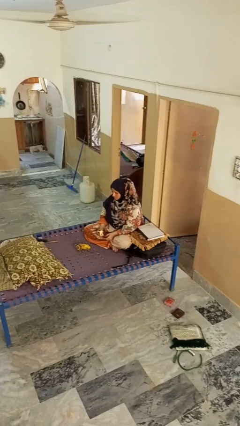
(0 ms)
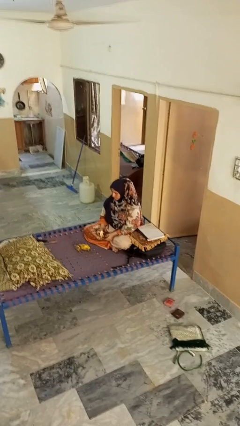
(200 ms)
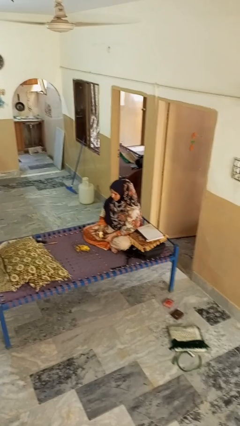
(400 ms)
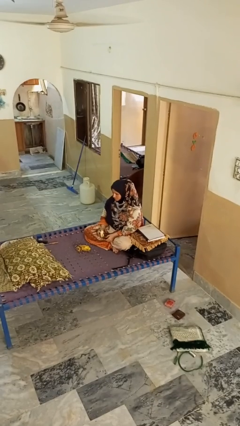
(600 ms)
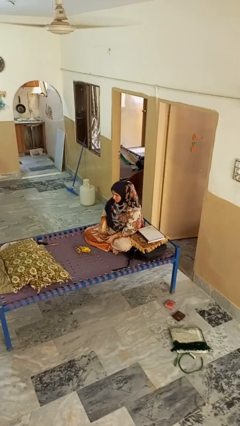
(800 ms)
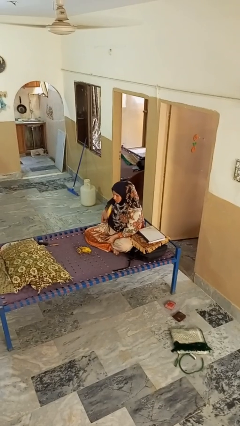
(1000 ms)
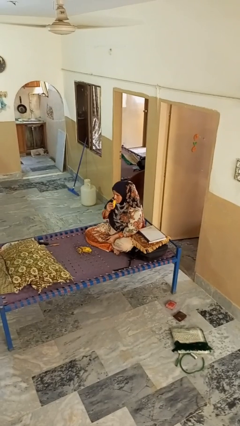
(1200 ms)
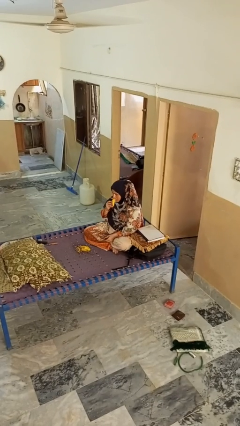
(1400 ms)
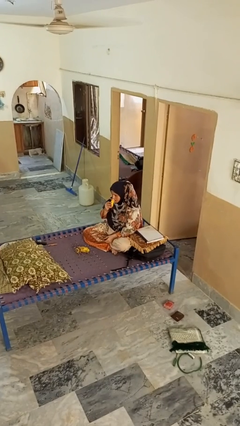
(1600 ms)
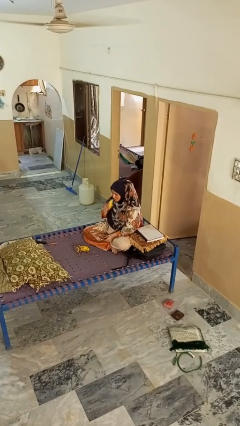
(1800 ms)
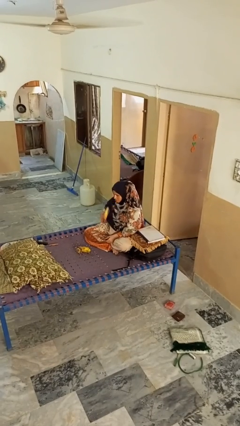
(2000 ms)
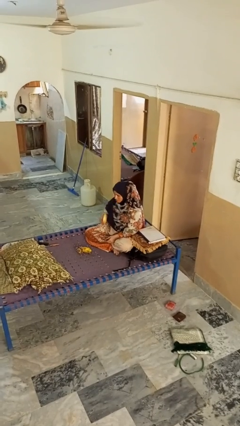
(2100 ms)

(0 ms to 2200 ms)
person eats banana

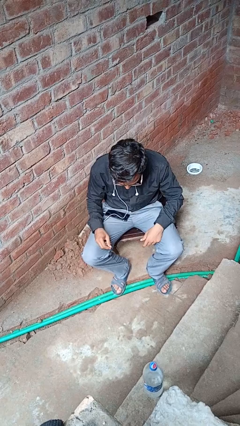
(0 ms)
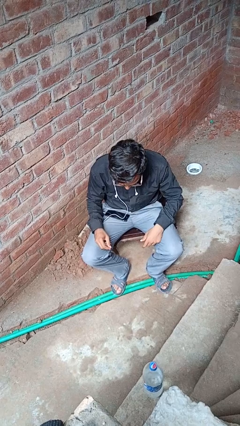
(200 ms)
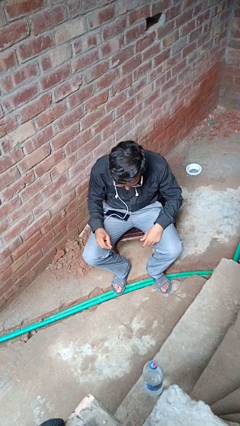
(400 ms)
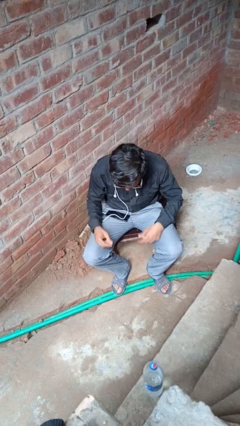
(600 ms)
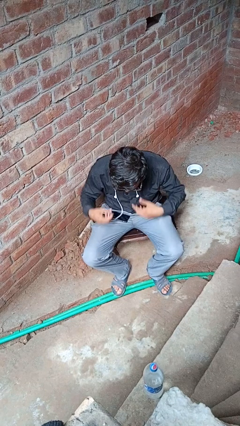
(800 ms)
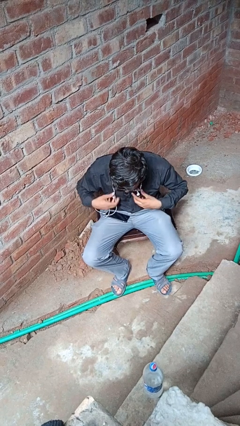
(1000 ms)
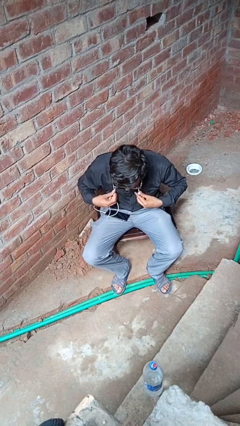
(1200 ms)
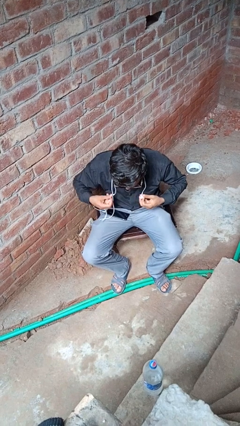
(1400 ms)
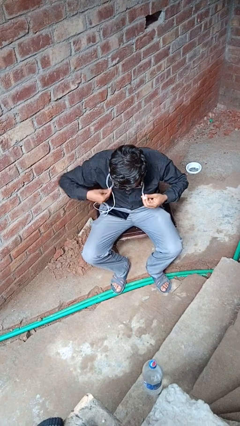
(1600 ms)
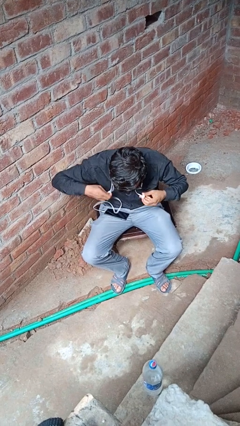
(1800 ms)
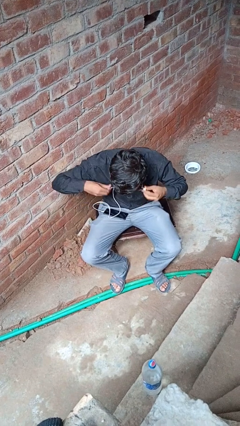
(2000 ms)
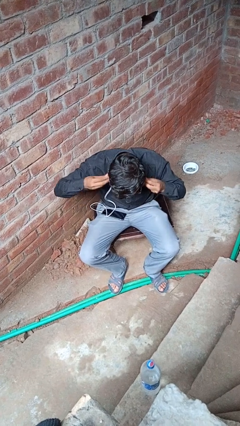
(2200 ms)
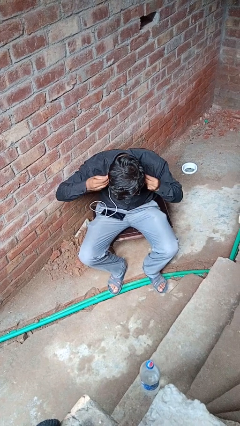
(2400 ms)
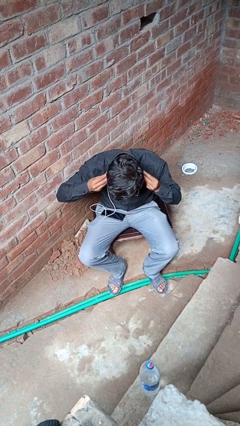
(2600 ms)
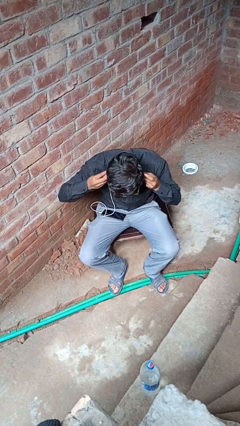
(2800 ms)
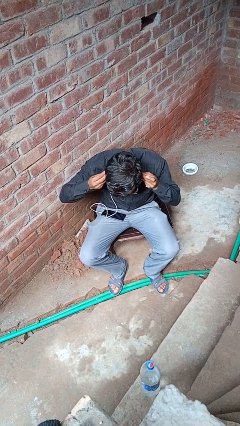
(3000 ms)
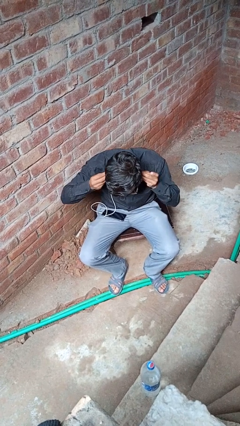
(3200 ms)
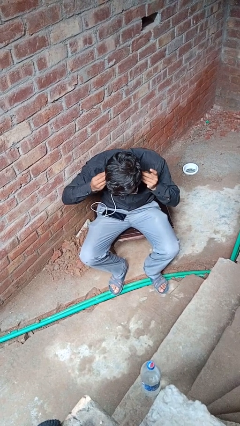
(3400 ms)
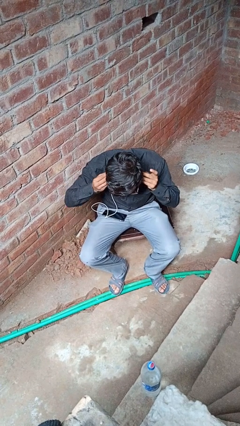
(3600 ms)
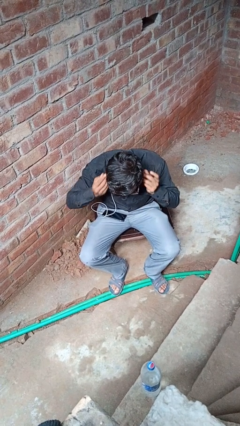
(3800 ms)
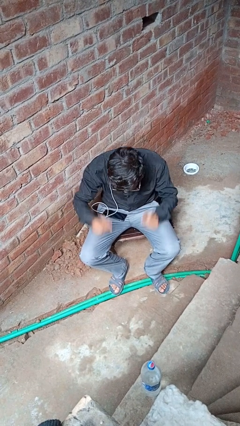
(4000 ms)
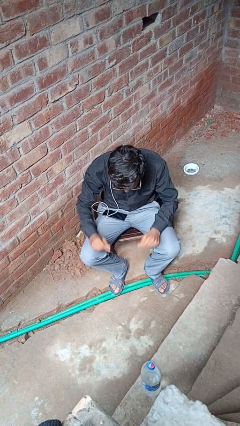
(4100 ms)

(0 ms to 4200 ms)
person puts on headphones

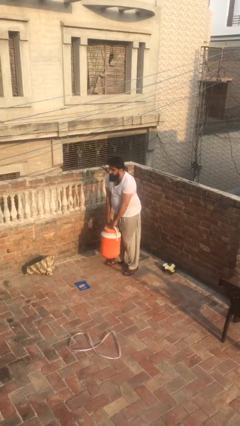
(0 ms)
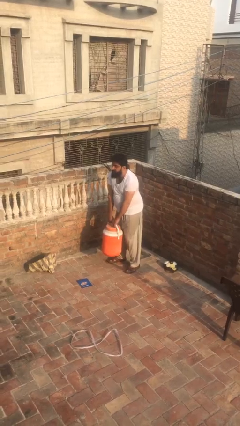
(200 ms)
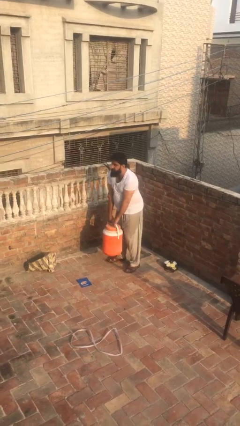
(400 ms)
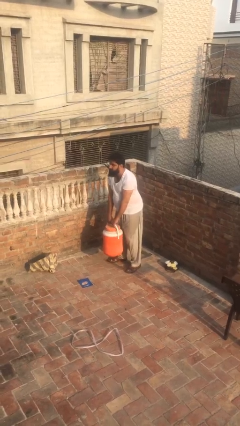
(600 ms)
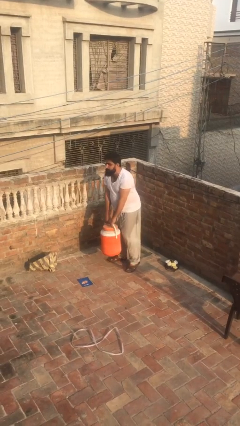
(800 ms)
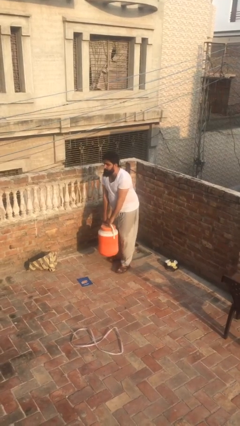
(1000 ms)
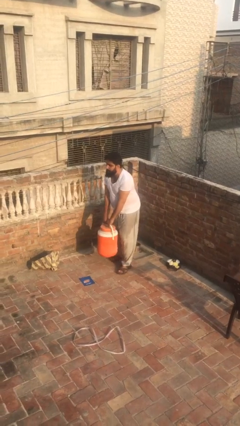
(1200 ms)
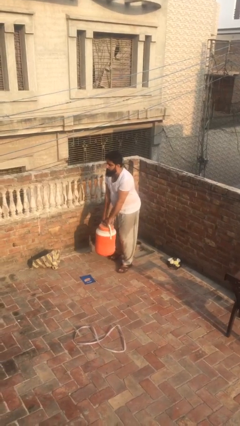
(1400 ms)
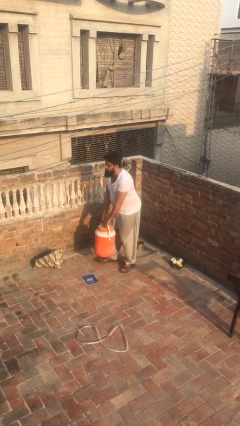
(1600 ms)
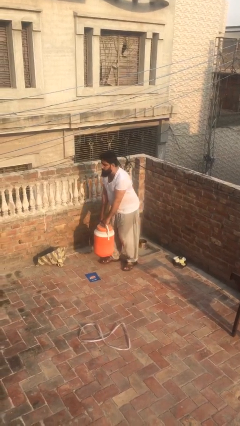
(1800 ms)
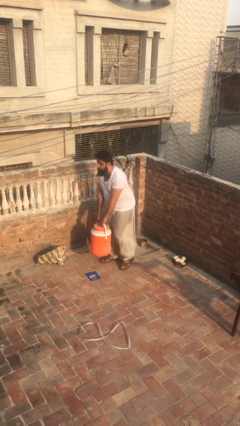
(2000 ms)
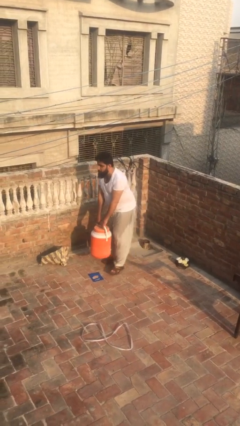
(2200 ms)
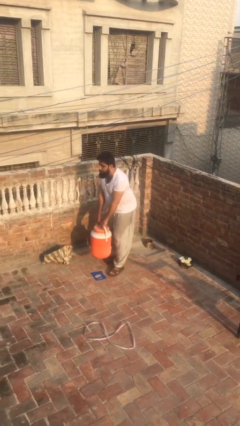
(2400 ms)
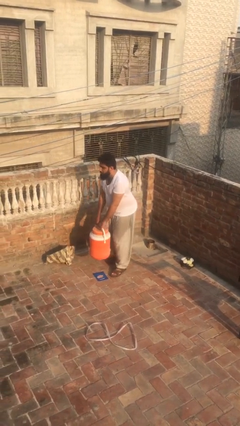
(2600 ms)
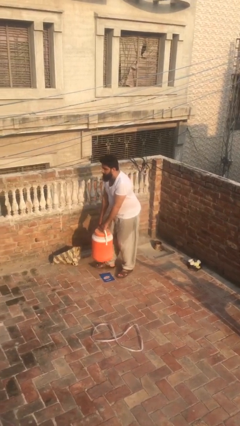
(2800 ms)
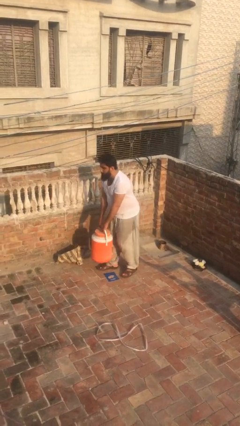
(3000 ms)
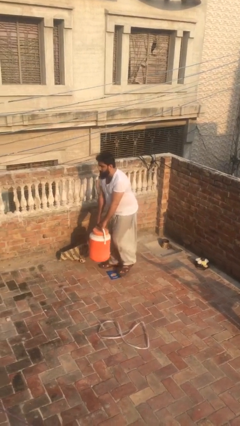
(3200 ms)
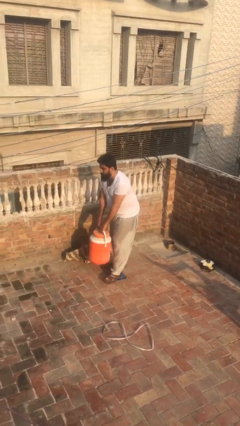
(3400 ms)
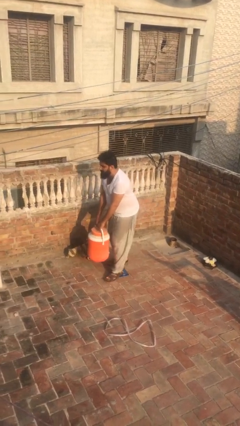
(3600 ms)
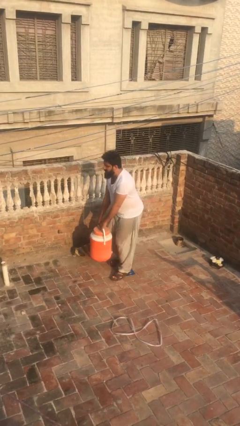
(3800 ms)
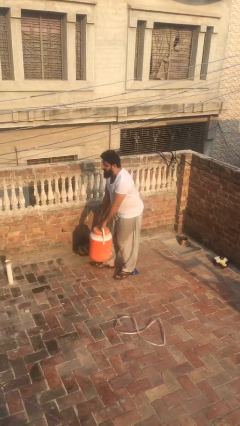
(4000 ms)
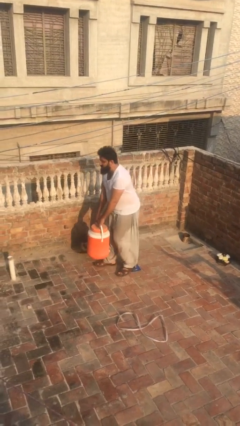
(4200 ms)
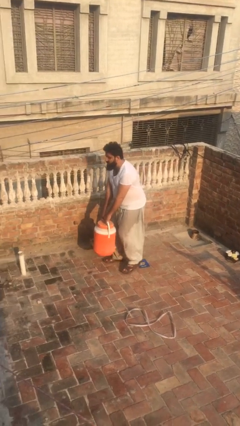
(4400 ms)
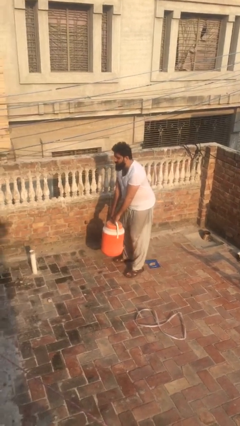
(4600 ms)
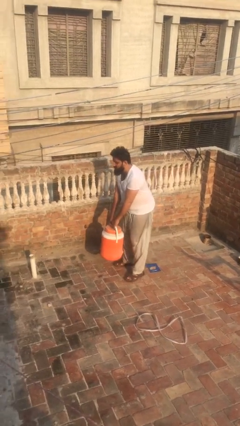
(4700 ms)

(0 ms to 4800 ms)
person carries heavy object

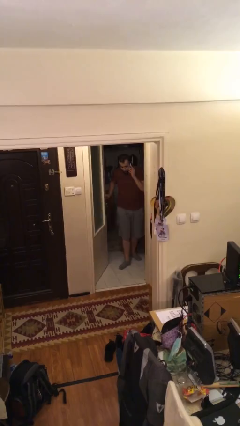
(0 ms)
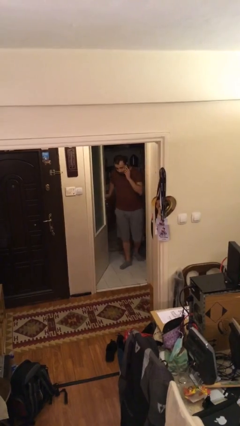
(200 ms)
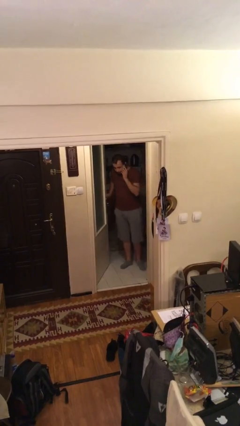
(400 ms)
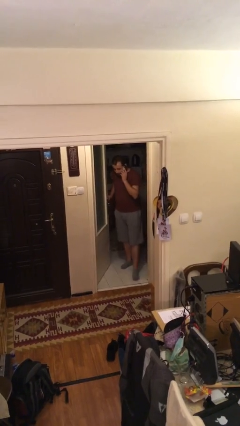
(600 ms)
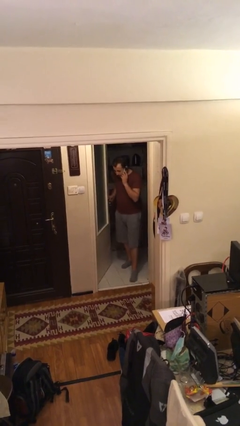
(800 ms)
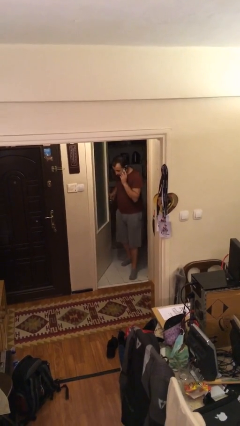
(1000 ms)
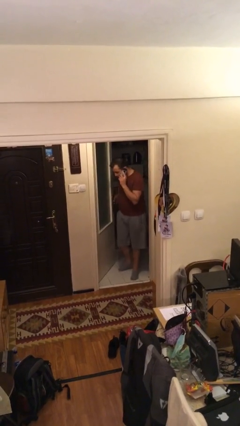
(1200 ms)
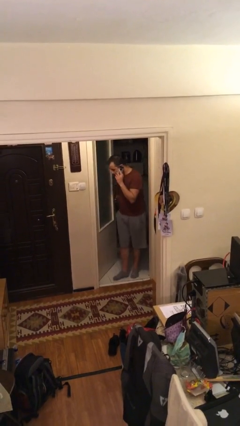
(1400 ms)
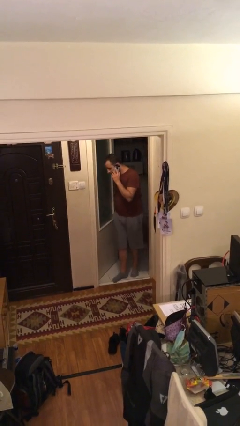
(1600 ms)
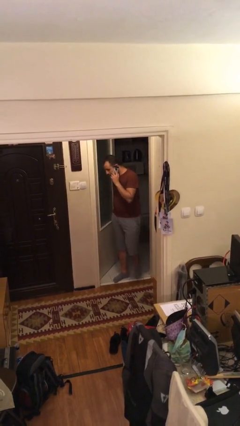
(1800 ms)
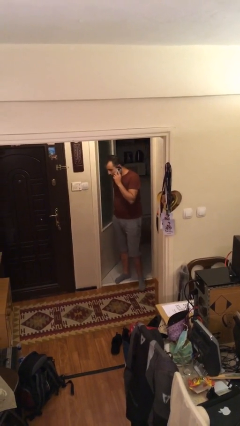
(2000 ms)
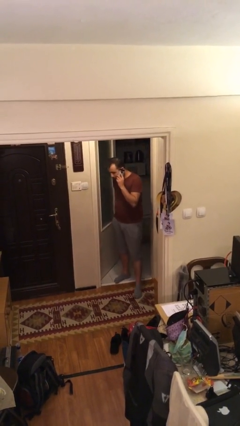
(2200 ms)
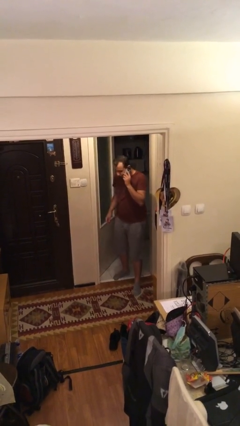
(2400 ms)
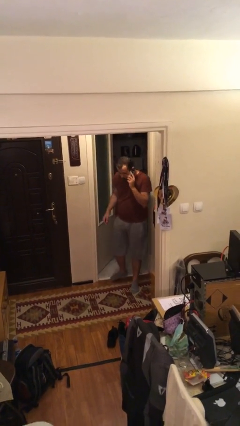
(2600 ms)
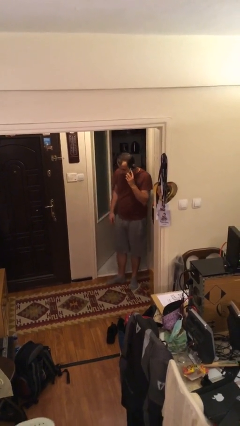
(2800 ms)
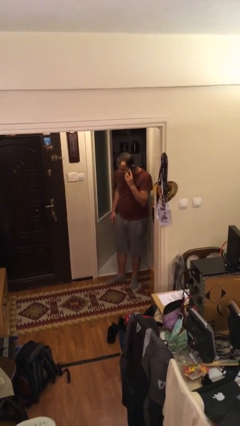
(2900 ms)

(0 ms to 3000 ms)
person enters scene through structure

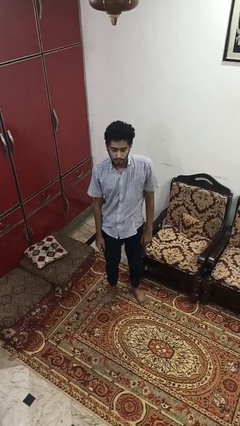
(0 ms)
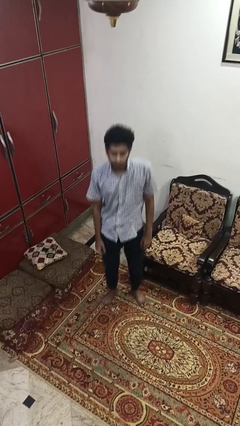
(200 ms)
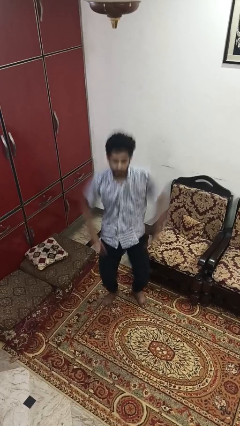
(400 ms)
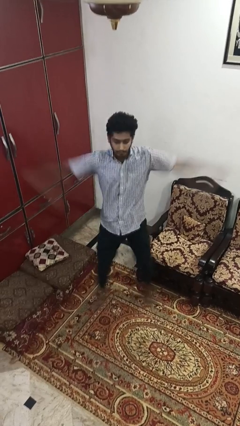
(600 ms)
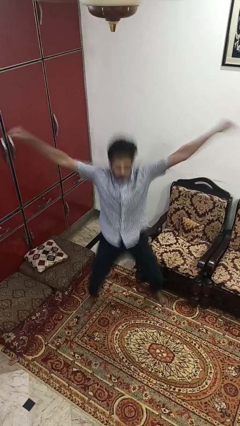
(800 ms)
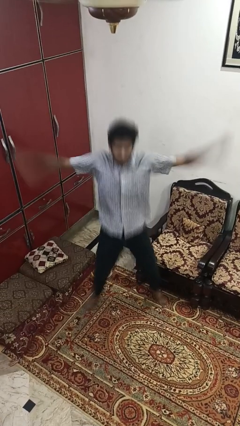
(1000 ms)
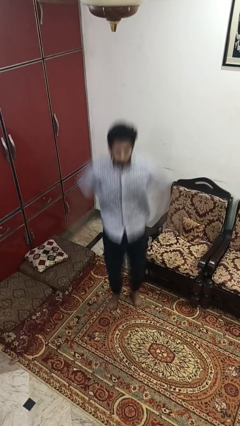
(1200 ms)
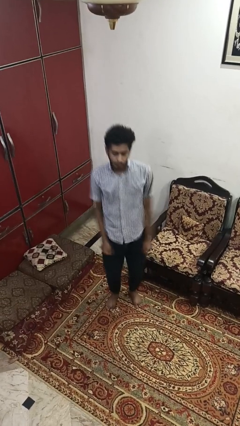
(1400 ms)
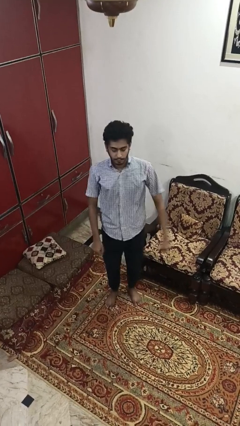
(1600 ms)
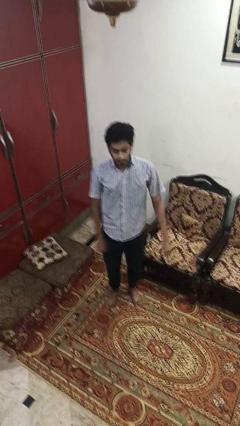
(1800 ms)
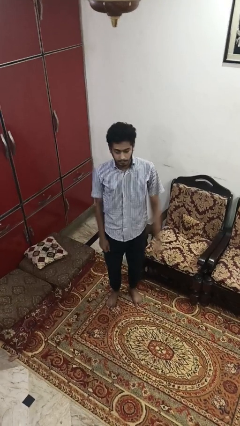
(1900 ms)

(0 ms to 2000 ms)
person exercises with jumping jacks

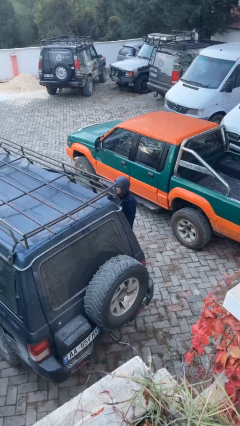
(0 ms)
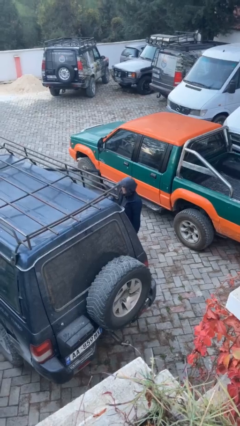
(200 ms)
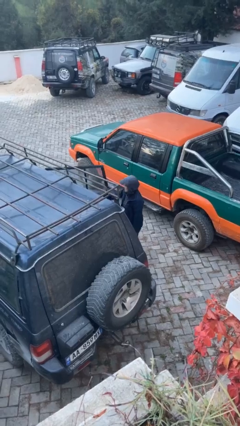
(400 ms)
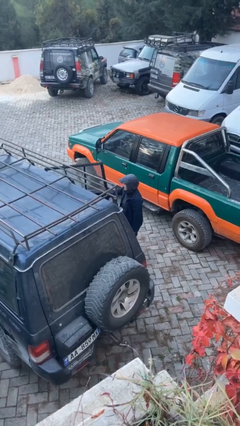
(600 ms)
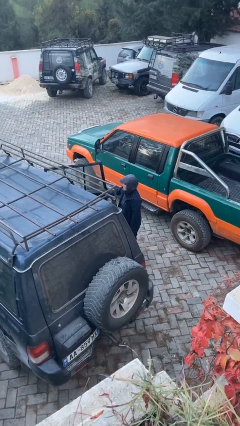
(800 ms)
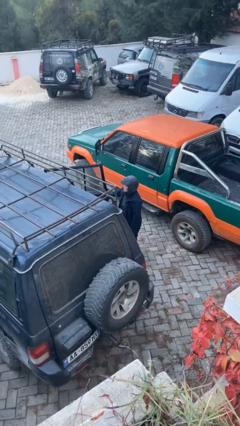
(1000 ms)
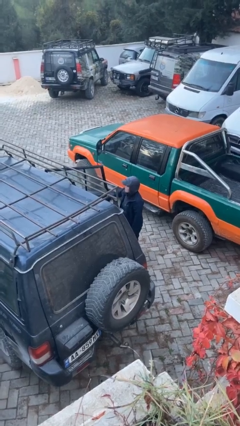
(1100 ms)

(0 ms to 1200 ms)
person opens car door
